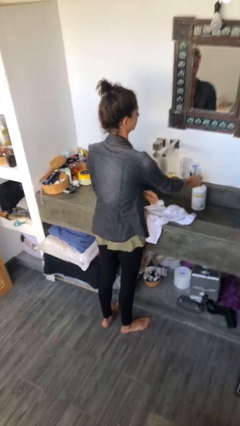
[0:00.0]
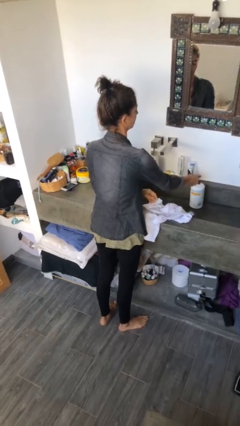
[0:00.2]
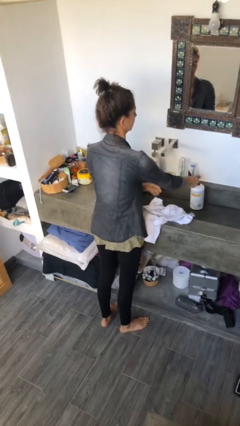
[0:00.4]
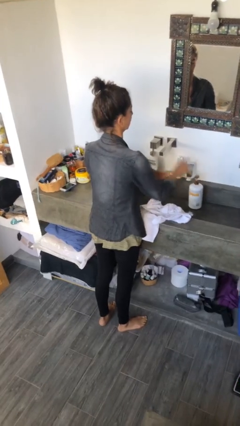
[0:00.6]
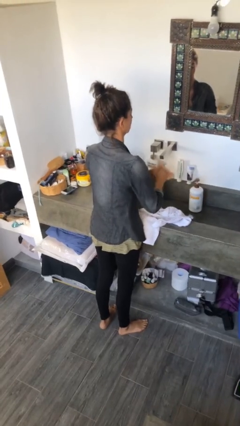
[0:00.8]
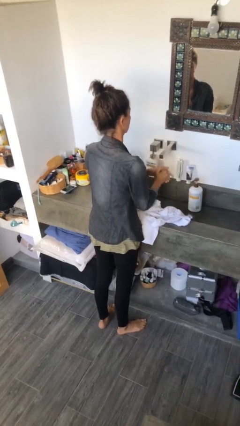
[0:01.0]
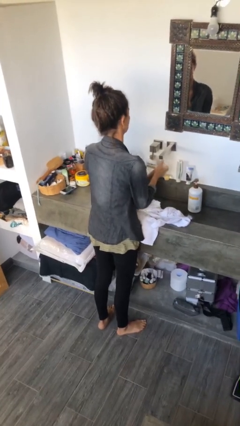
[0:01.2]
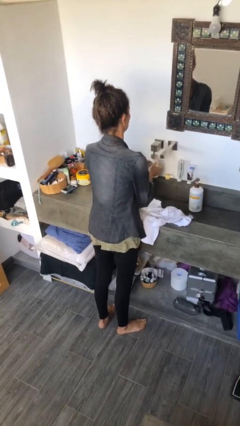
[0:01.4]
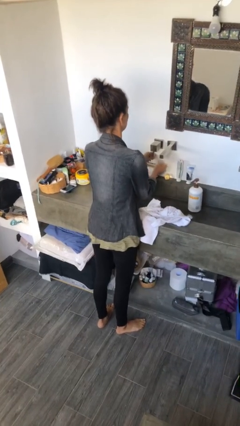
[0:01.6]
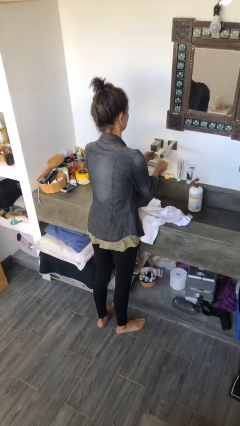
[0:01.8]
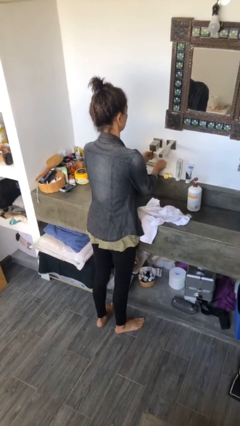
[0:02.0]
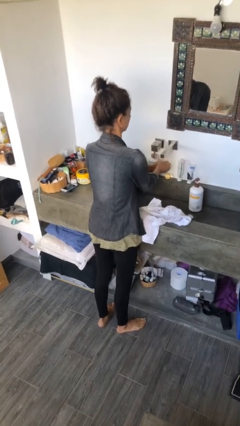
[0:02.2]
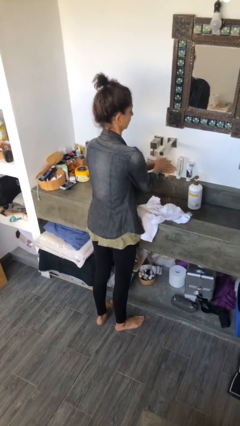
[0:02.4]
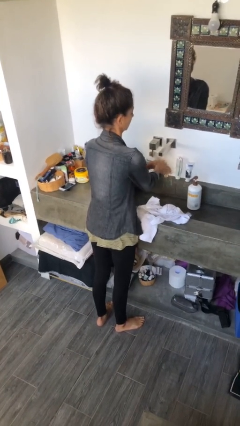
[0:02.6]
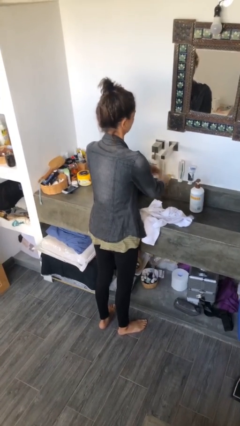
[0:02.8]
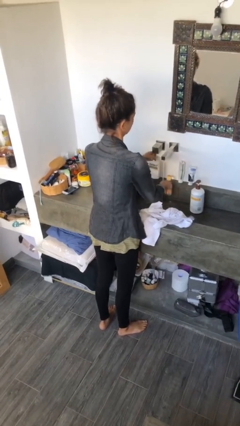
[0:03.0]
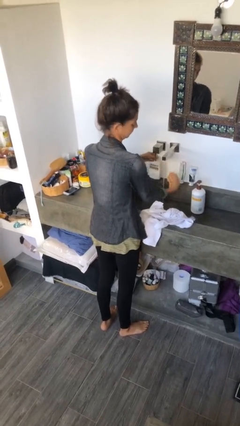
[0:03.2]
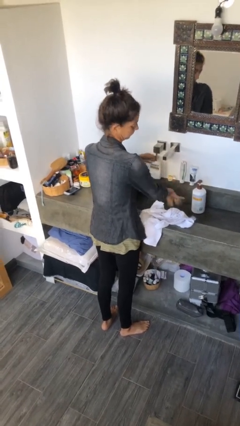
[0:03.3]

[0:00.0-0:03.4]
person washes hands

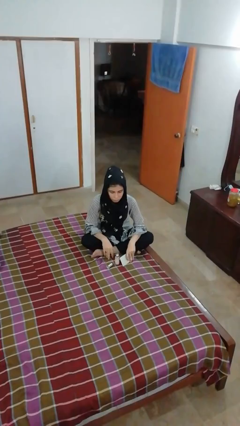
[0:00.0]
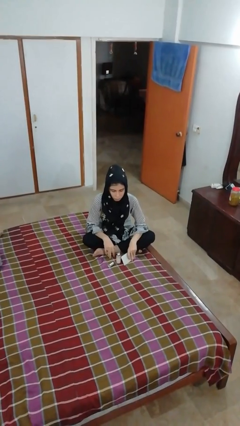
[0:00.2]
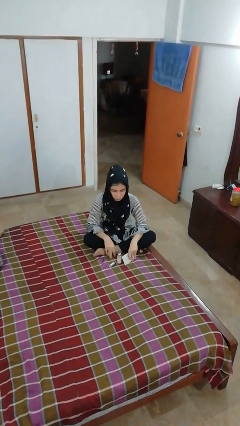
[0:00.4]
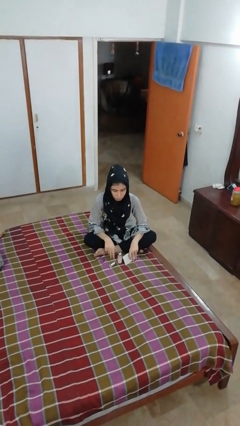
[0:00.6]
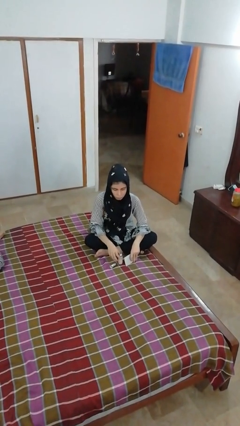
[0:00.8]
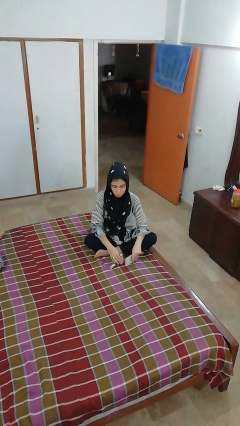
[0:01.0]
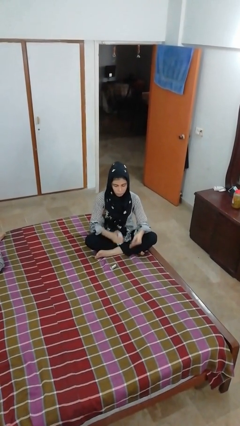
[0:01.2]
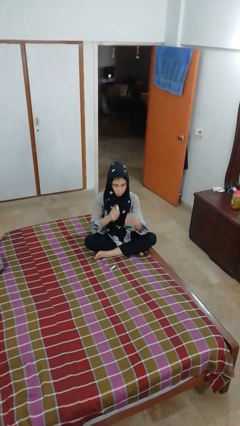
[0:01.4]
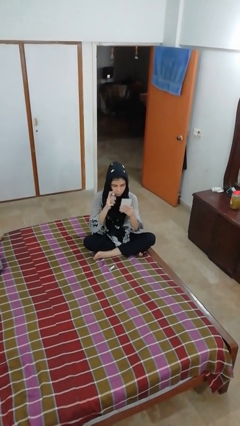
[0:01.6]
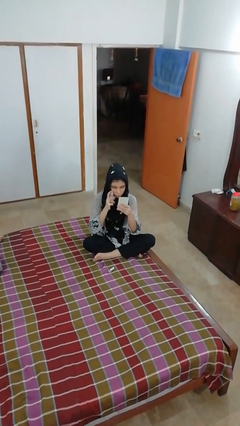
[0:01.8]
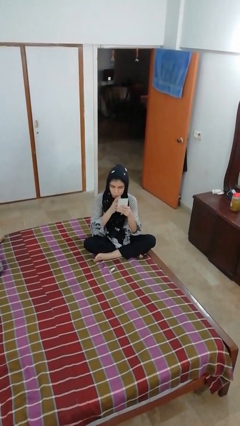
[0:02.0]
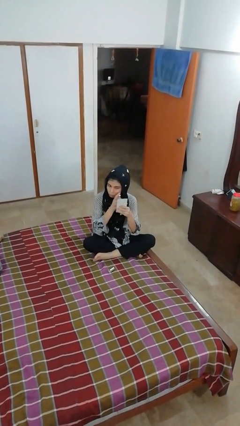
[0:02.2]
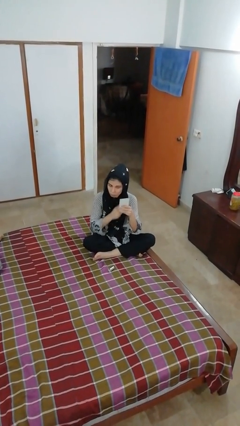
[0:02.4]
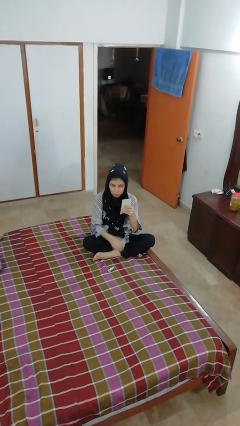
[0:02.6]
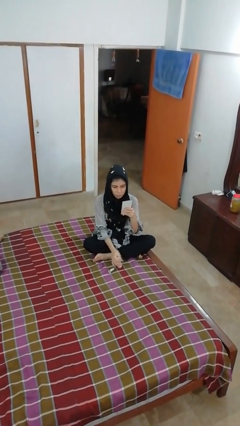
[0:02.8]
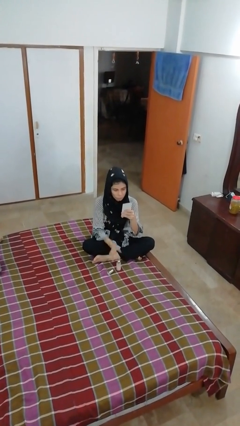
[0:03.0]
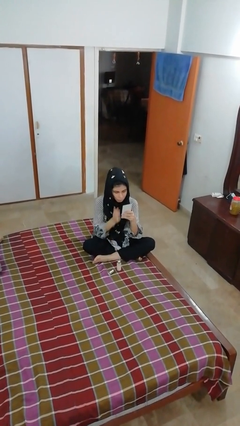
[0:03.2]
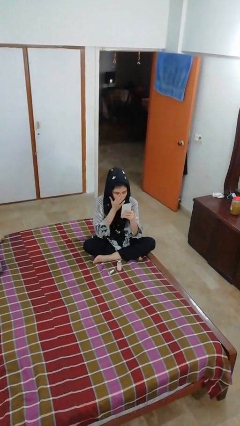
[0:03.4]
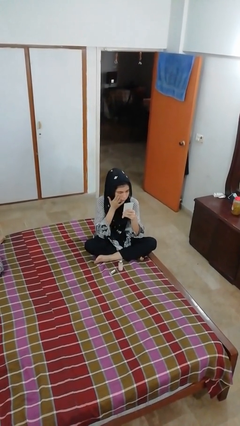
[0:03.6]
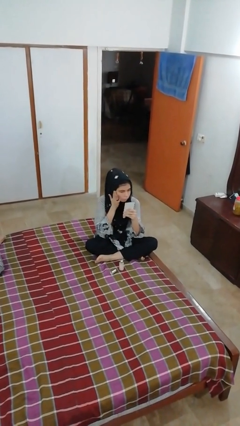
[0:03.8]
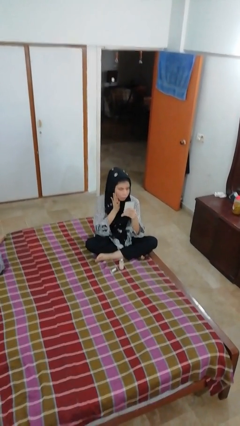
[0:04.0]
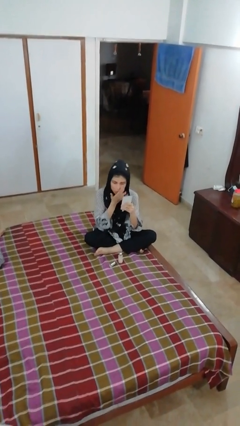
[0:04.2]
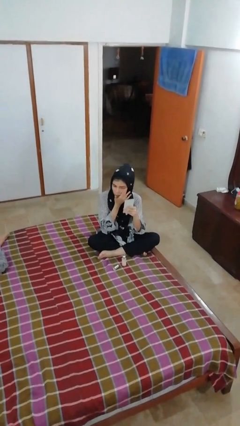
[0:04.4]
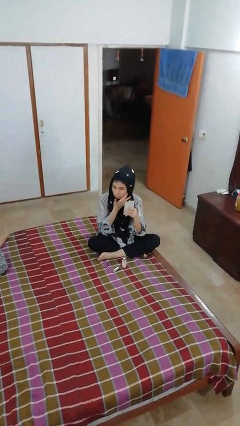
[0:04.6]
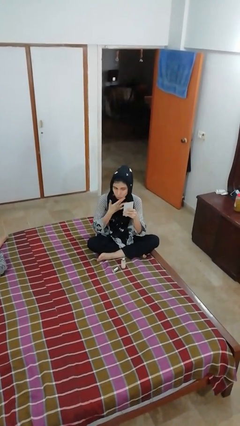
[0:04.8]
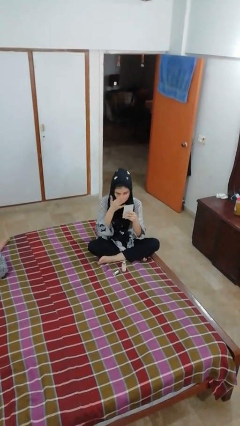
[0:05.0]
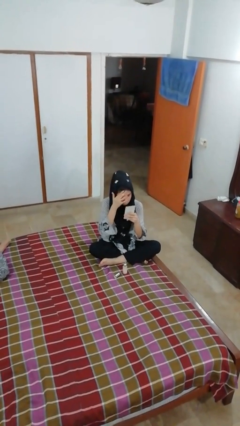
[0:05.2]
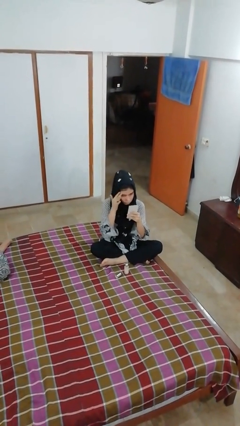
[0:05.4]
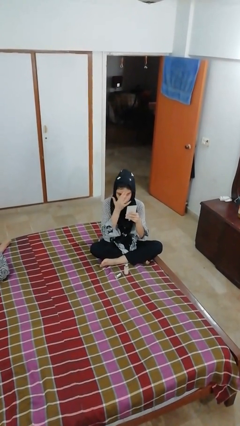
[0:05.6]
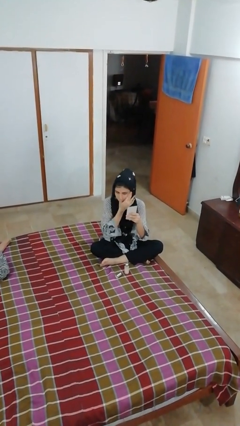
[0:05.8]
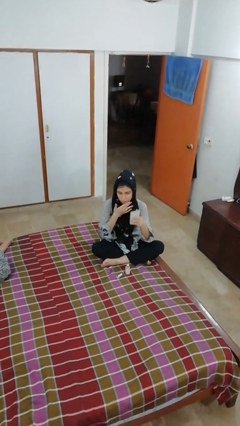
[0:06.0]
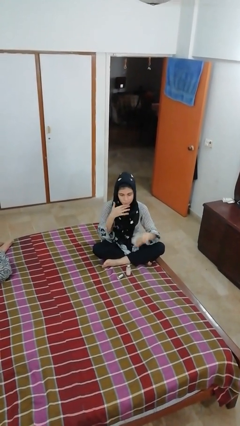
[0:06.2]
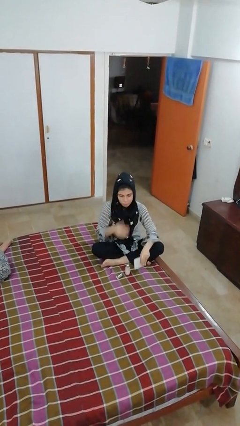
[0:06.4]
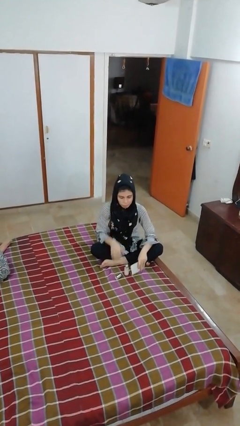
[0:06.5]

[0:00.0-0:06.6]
person applies foundation makeup

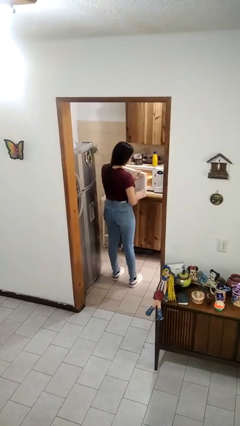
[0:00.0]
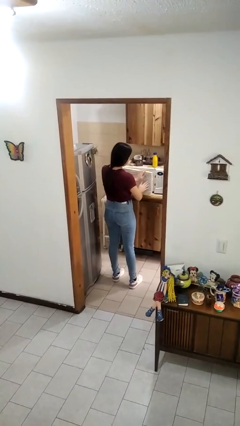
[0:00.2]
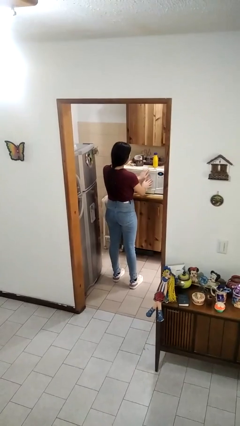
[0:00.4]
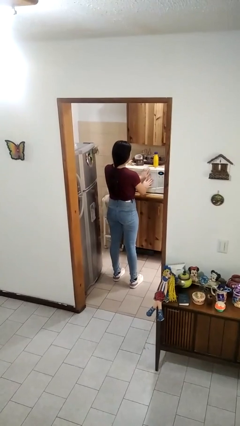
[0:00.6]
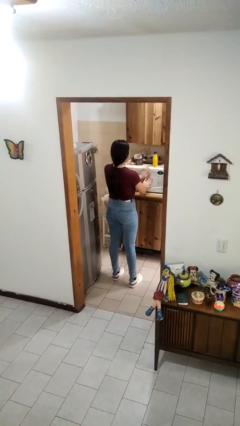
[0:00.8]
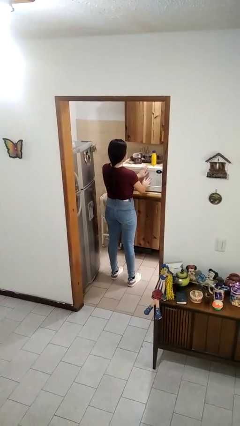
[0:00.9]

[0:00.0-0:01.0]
person closes microwave

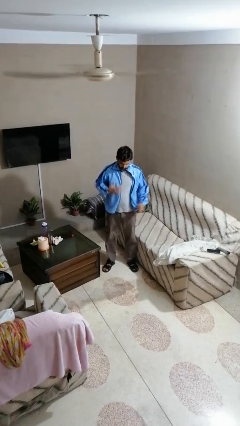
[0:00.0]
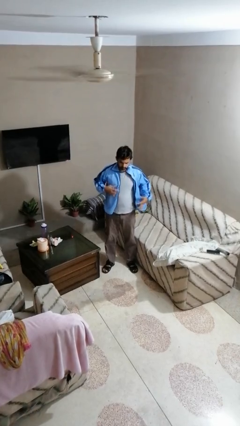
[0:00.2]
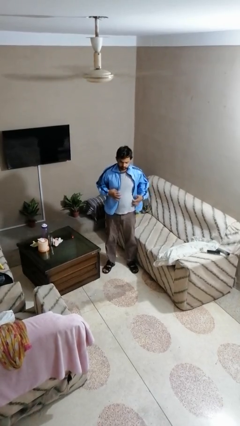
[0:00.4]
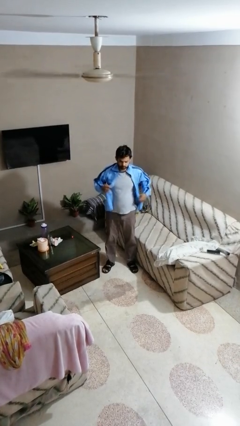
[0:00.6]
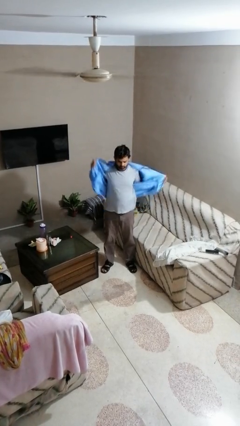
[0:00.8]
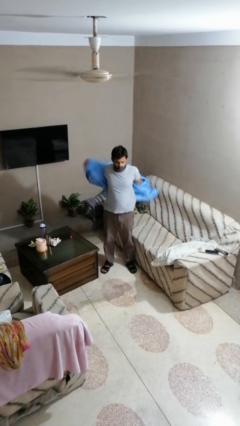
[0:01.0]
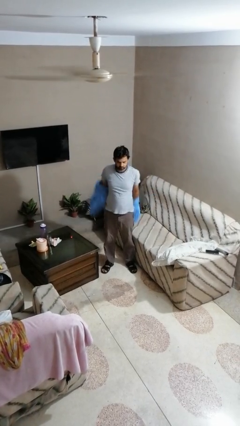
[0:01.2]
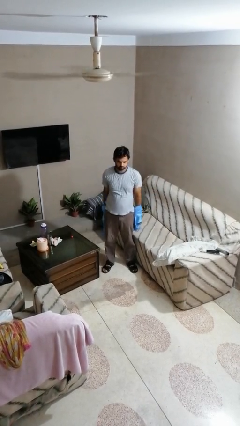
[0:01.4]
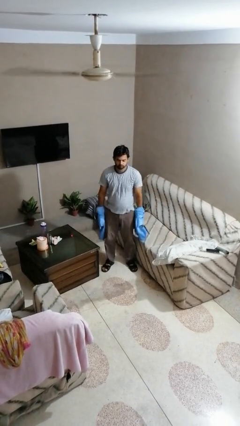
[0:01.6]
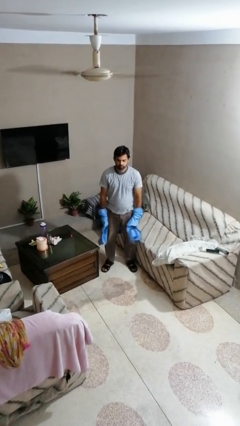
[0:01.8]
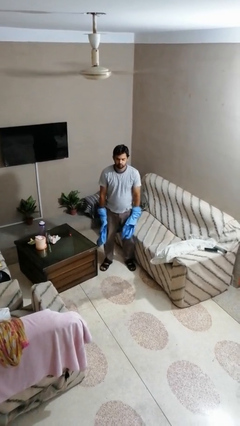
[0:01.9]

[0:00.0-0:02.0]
person takes off jacket

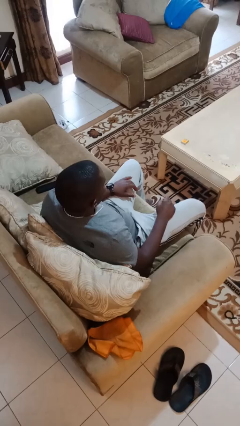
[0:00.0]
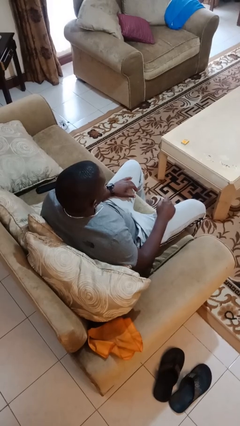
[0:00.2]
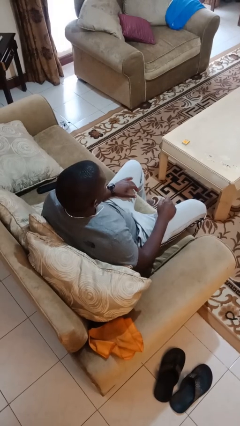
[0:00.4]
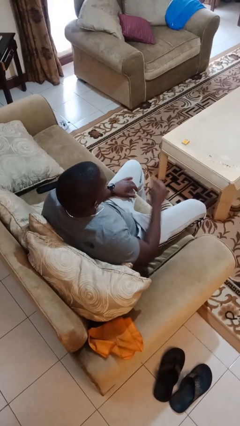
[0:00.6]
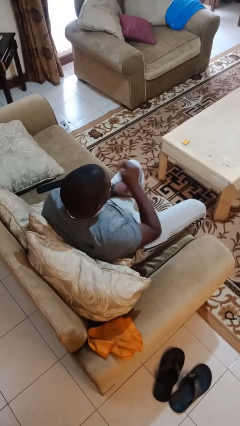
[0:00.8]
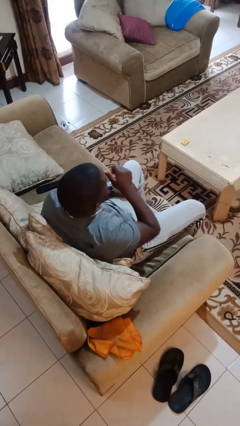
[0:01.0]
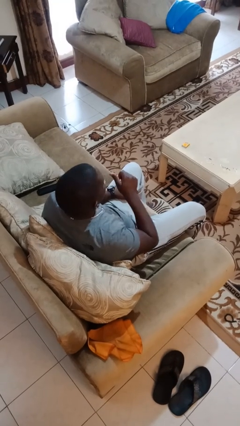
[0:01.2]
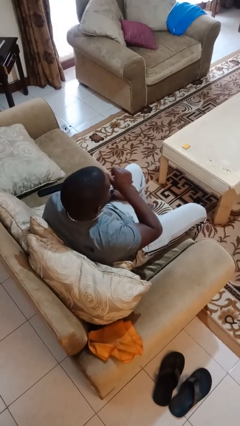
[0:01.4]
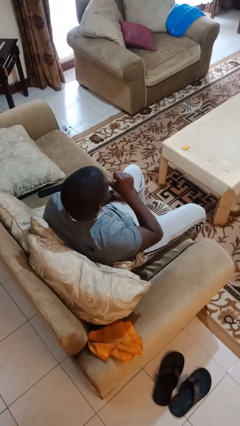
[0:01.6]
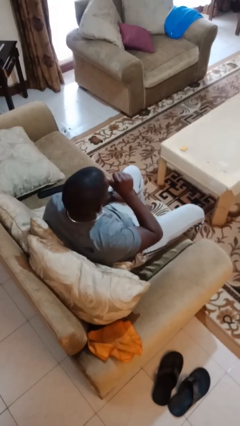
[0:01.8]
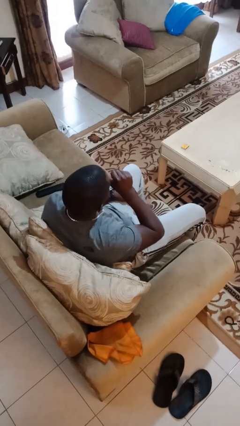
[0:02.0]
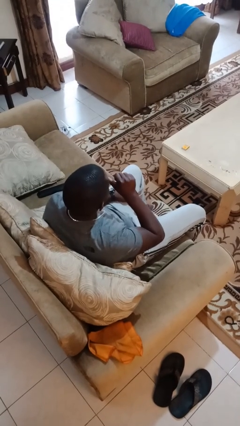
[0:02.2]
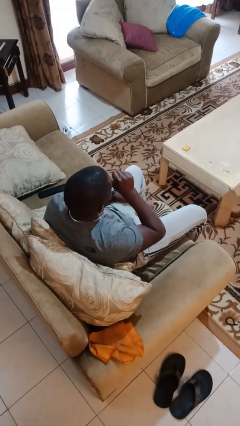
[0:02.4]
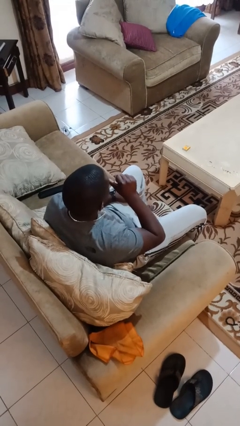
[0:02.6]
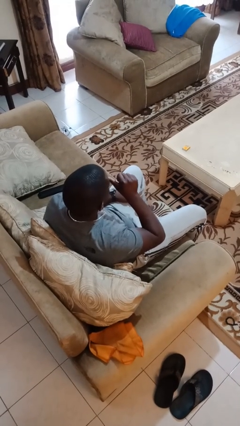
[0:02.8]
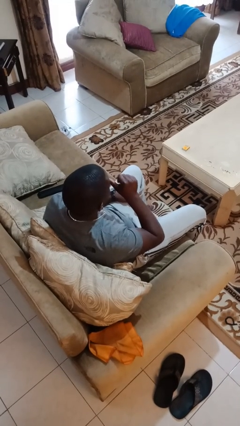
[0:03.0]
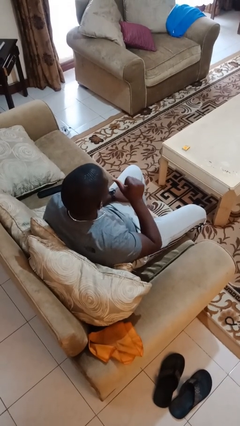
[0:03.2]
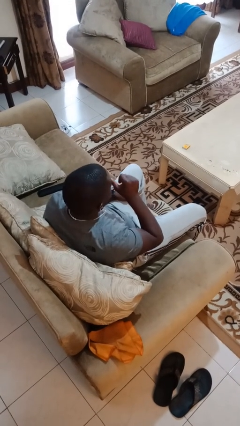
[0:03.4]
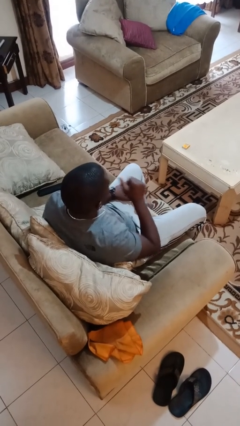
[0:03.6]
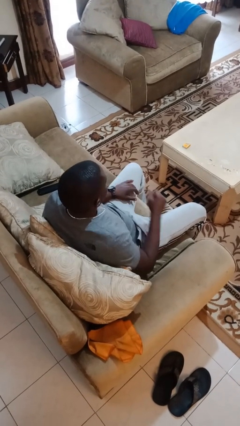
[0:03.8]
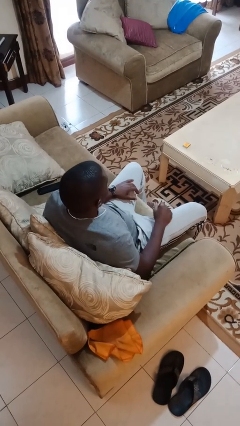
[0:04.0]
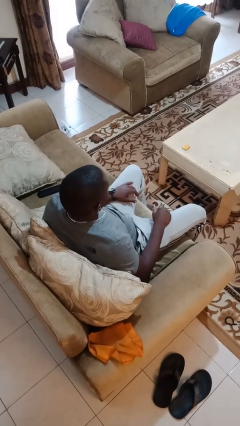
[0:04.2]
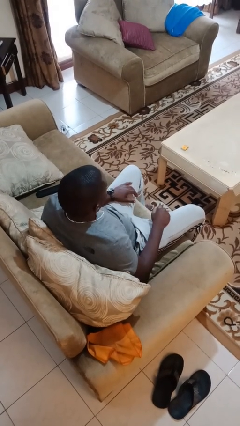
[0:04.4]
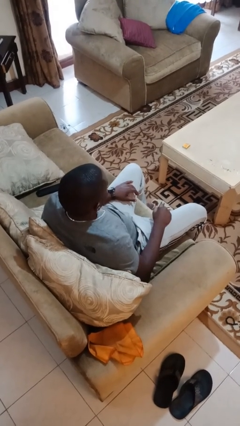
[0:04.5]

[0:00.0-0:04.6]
person licks fingers

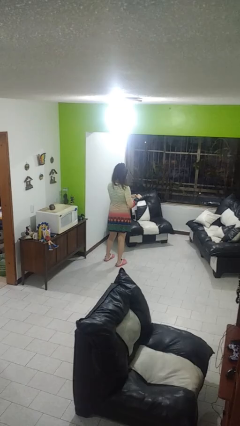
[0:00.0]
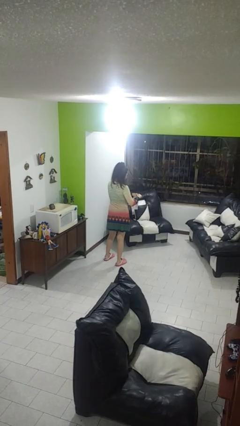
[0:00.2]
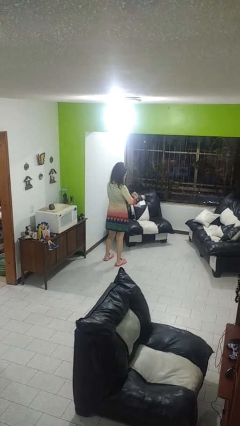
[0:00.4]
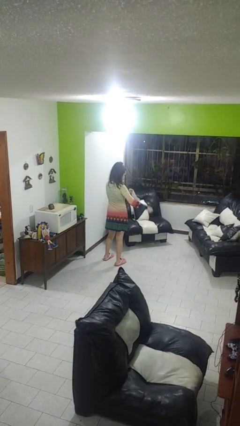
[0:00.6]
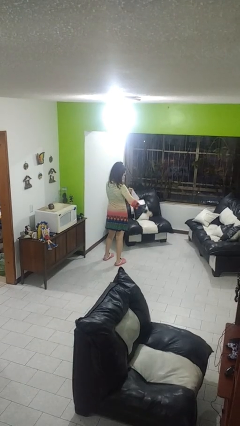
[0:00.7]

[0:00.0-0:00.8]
person tears paper
